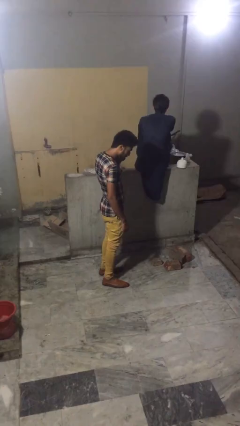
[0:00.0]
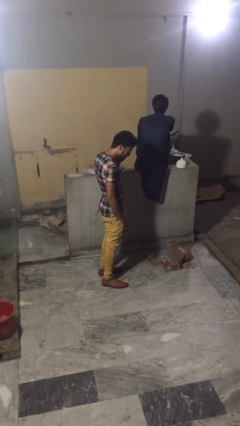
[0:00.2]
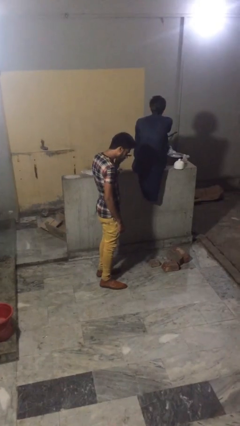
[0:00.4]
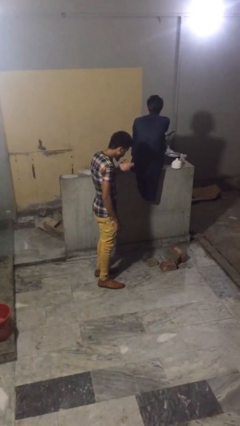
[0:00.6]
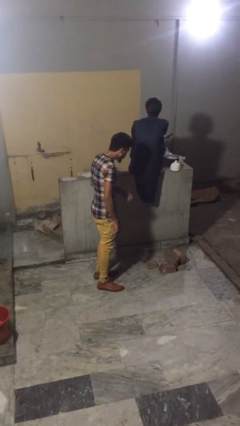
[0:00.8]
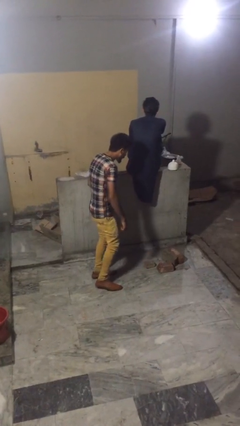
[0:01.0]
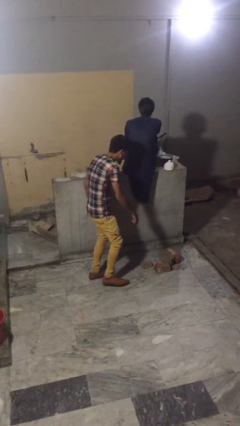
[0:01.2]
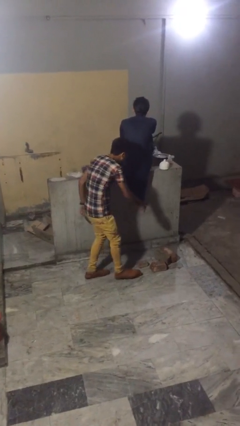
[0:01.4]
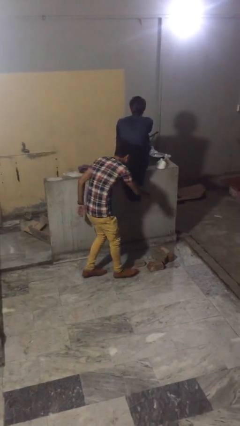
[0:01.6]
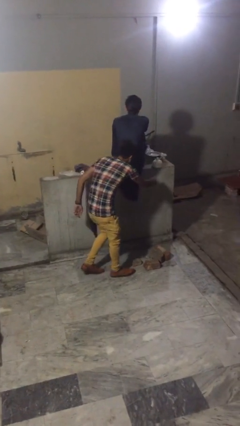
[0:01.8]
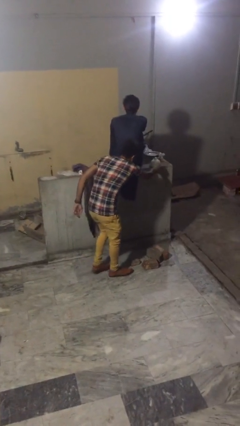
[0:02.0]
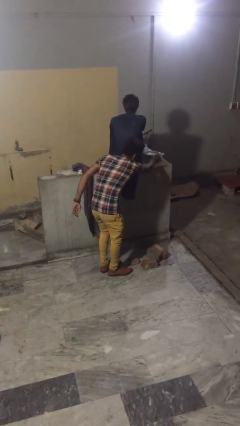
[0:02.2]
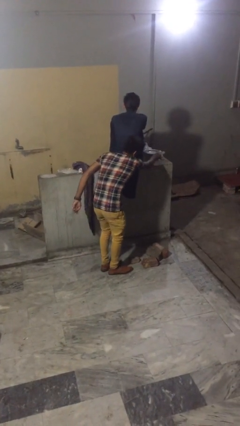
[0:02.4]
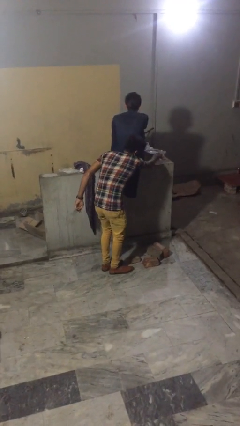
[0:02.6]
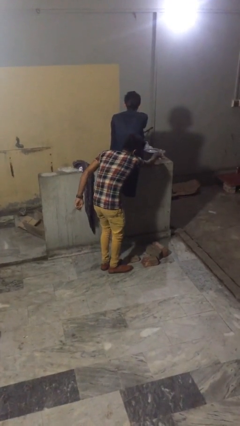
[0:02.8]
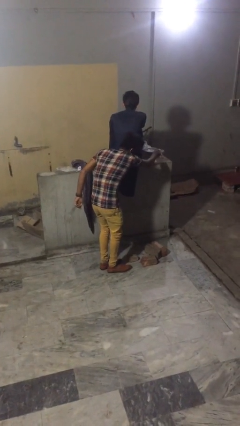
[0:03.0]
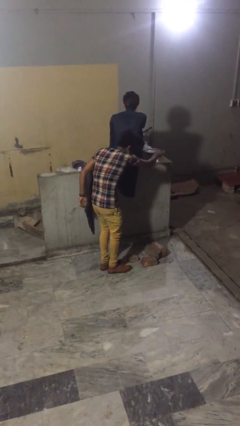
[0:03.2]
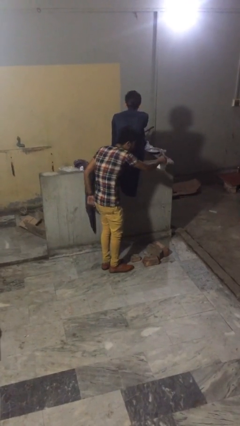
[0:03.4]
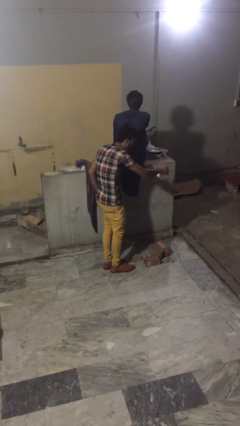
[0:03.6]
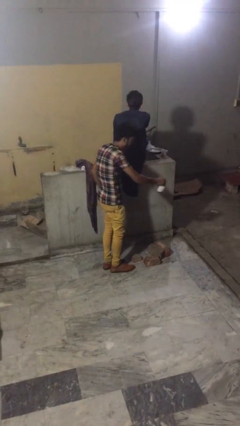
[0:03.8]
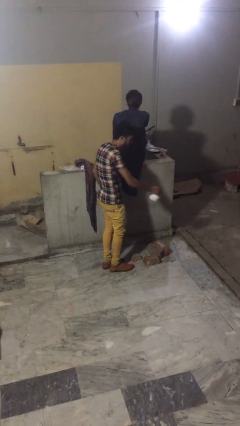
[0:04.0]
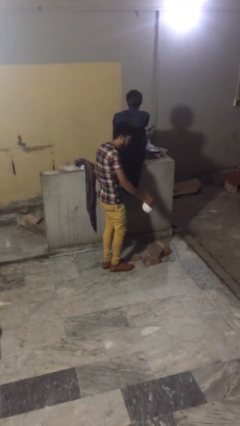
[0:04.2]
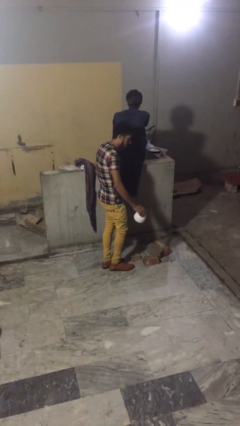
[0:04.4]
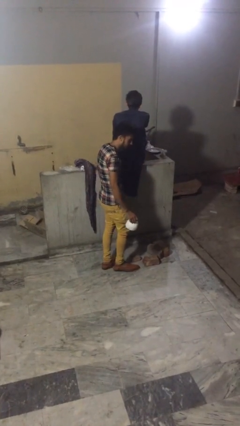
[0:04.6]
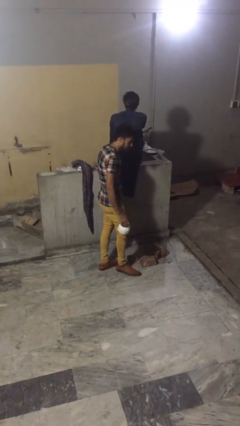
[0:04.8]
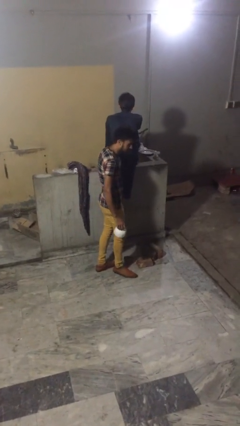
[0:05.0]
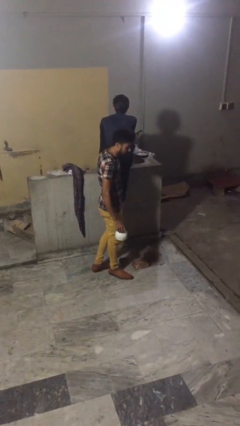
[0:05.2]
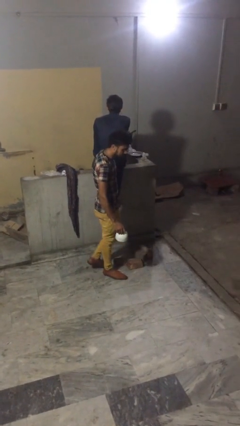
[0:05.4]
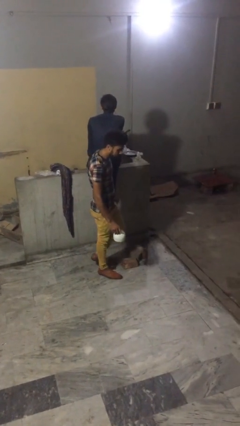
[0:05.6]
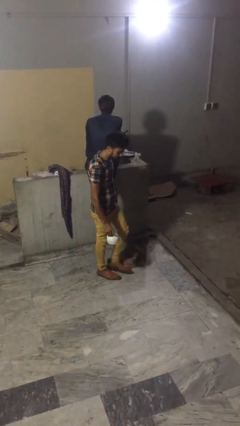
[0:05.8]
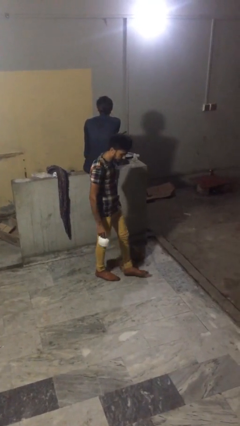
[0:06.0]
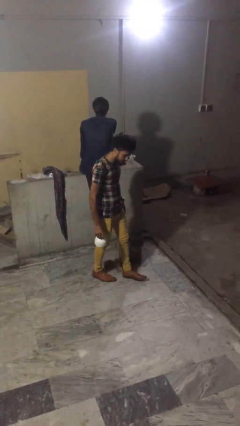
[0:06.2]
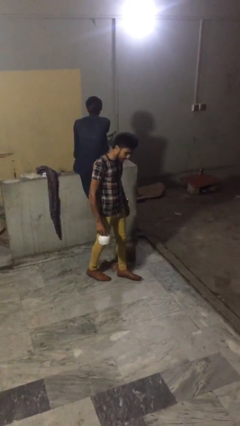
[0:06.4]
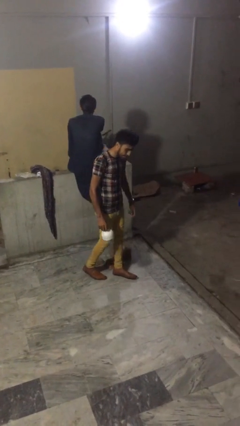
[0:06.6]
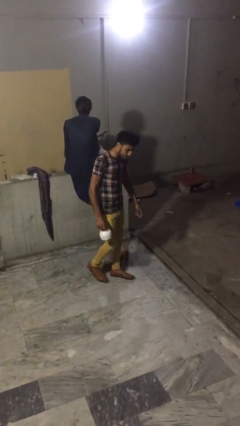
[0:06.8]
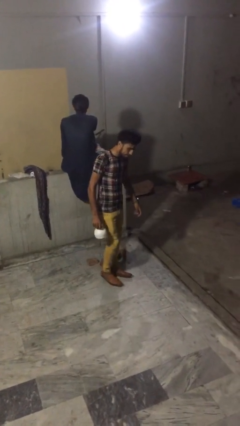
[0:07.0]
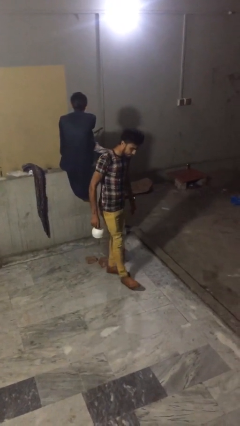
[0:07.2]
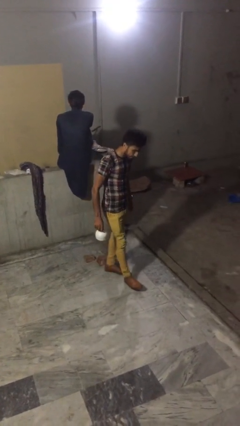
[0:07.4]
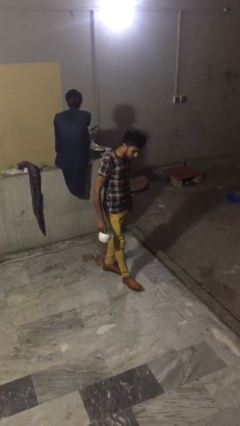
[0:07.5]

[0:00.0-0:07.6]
person steals object from person

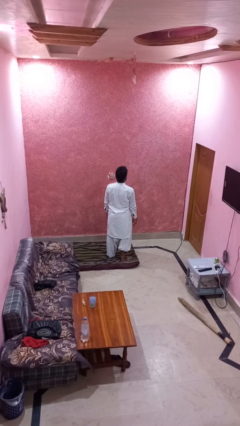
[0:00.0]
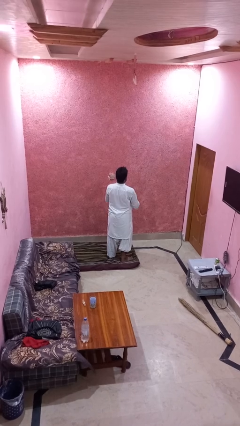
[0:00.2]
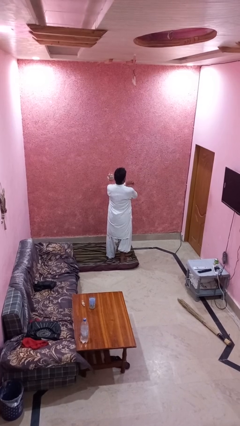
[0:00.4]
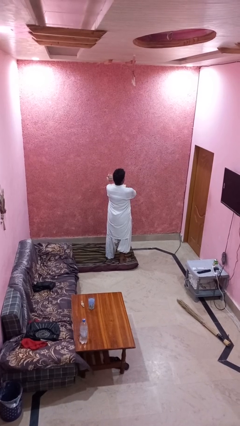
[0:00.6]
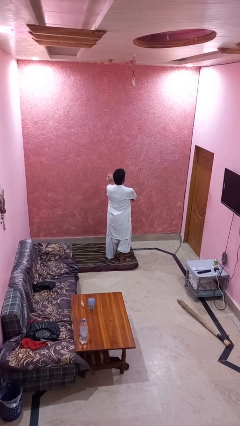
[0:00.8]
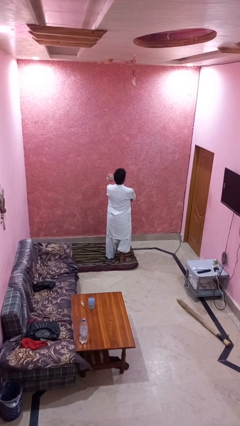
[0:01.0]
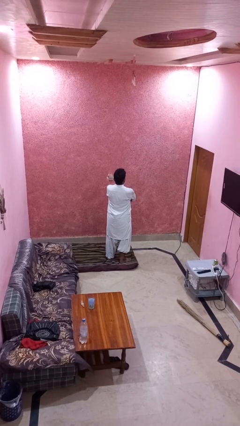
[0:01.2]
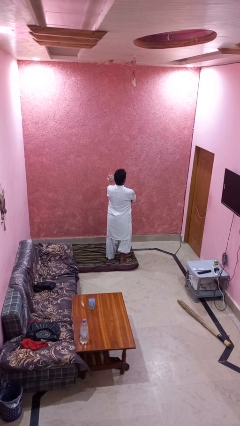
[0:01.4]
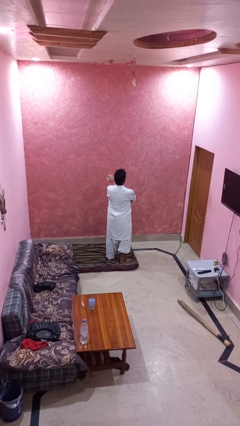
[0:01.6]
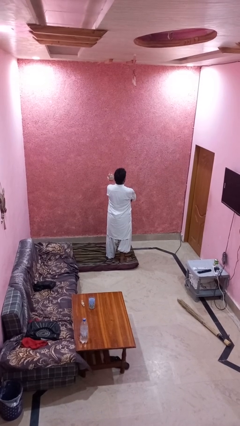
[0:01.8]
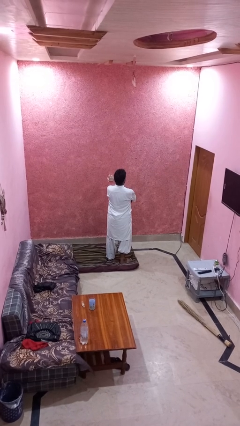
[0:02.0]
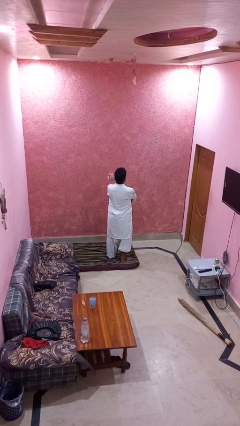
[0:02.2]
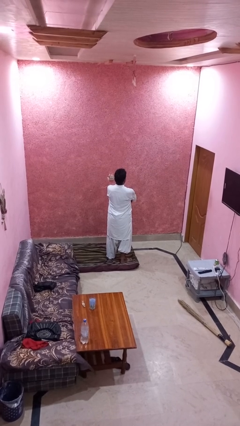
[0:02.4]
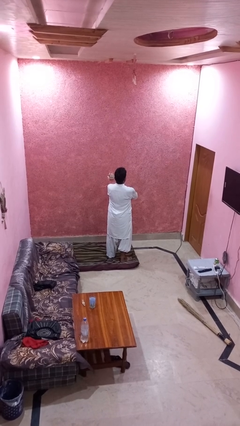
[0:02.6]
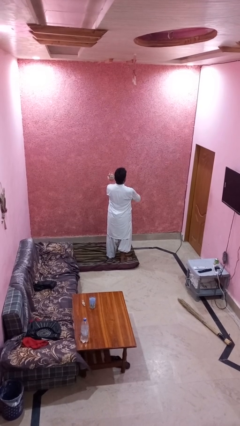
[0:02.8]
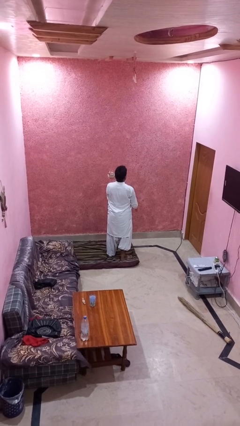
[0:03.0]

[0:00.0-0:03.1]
person crosses arms

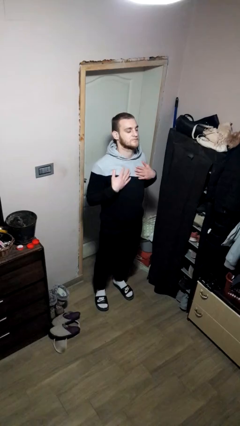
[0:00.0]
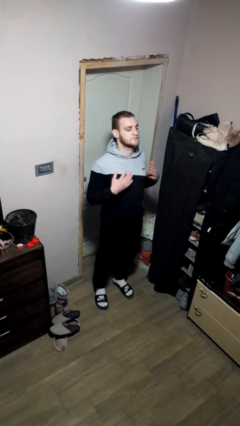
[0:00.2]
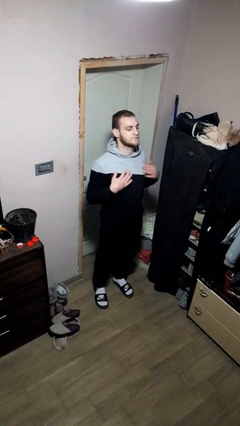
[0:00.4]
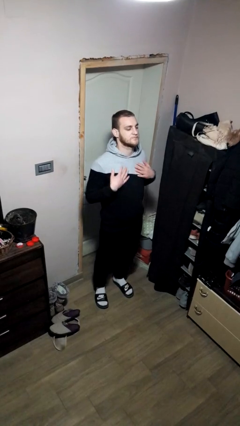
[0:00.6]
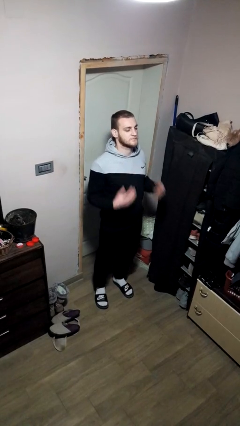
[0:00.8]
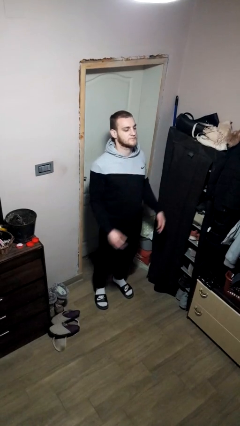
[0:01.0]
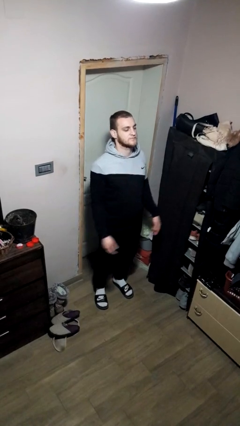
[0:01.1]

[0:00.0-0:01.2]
person drums on chest

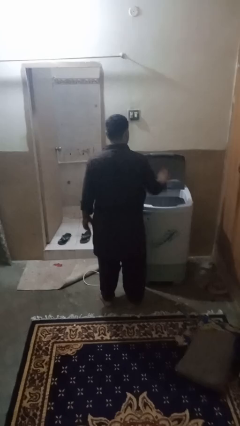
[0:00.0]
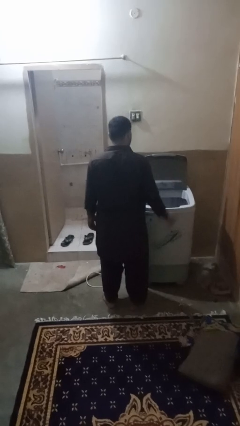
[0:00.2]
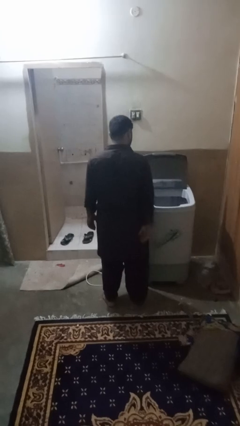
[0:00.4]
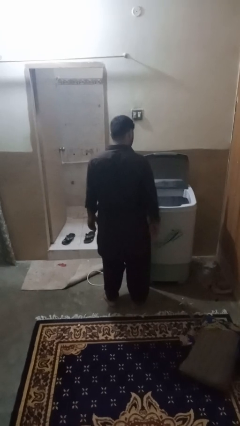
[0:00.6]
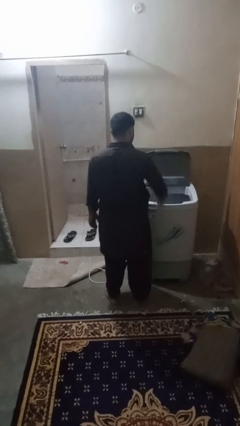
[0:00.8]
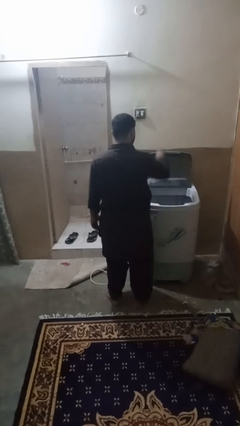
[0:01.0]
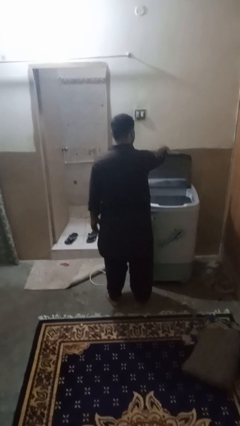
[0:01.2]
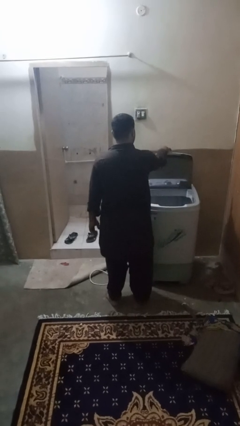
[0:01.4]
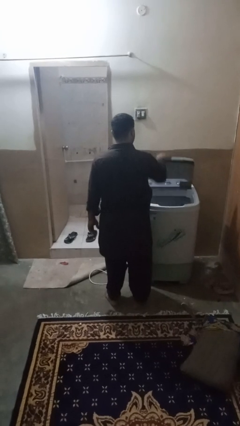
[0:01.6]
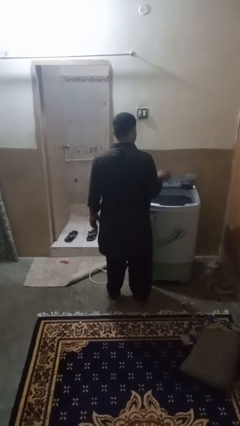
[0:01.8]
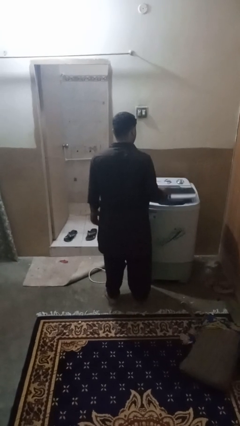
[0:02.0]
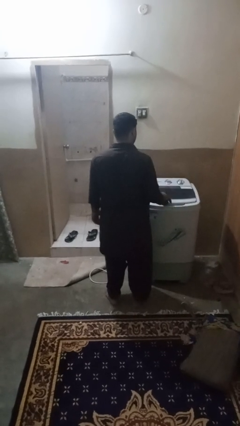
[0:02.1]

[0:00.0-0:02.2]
person closes clothes washer

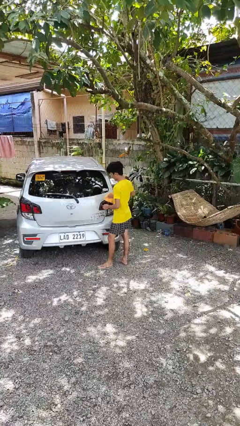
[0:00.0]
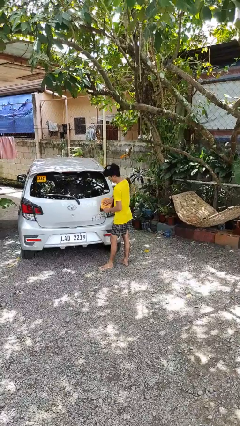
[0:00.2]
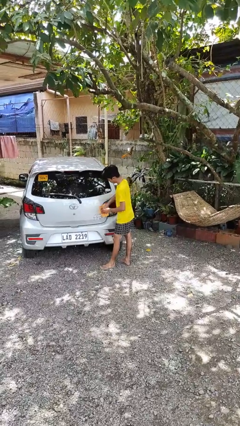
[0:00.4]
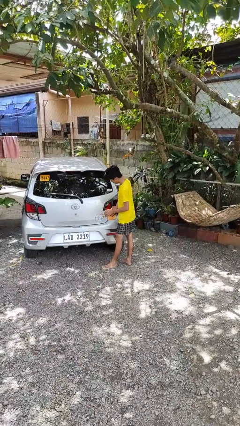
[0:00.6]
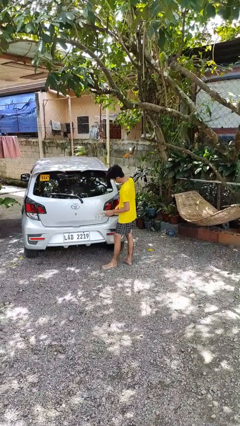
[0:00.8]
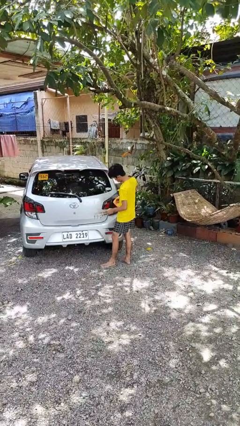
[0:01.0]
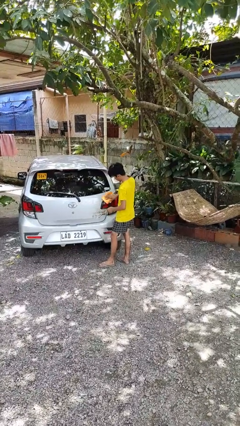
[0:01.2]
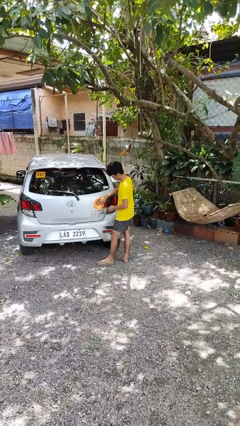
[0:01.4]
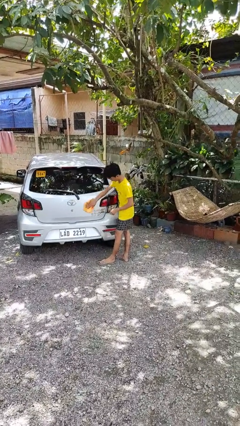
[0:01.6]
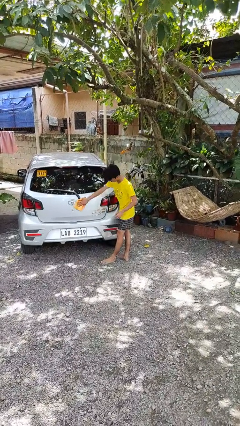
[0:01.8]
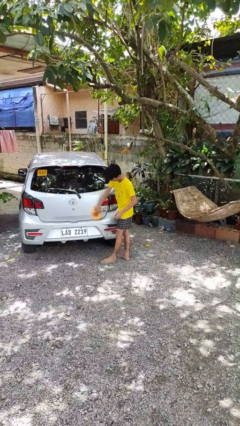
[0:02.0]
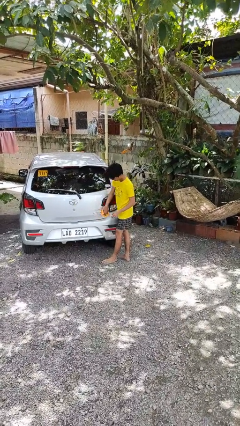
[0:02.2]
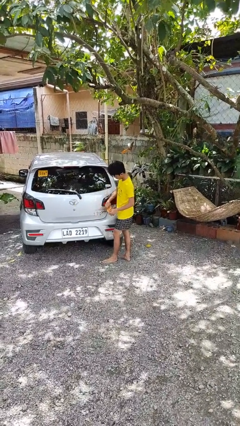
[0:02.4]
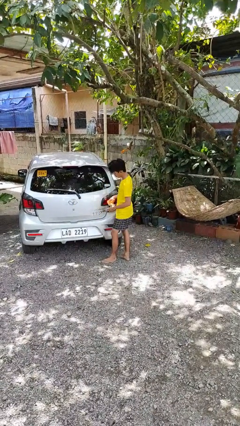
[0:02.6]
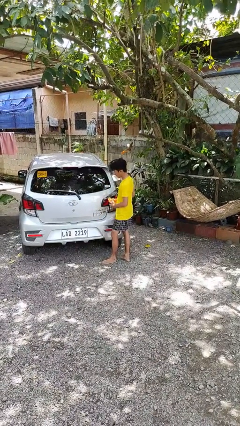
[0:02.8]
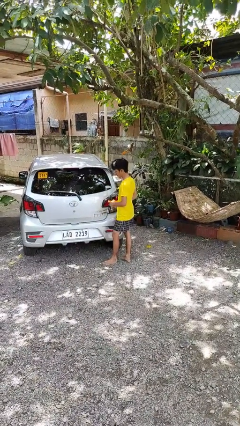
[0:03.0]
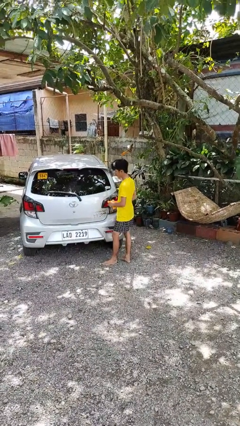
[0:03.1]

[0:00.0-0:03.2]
person polishes car with rag

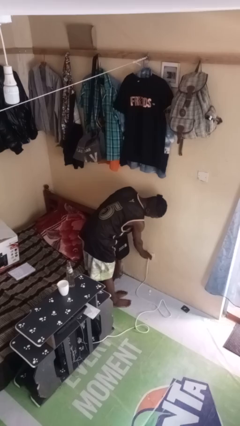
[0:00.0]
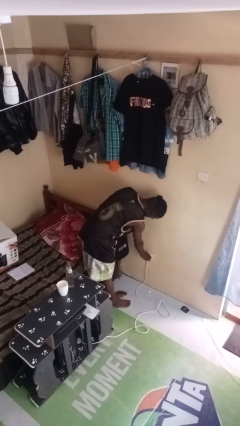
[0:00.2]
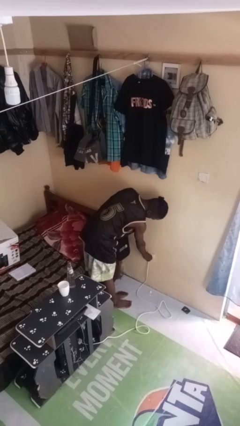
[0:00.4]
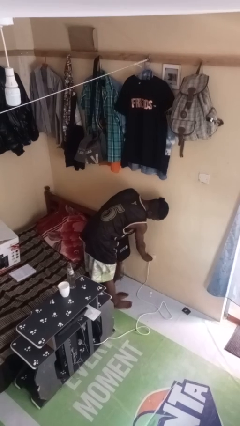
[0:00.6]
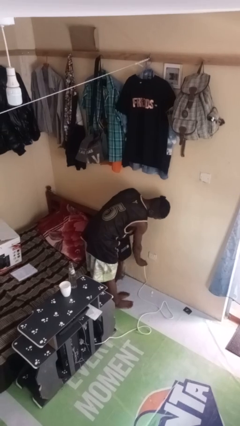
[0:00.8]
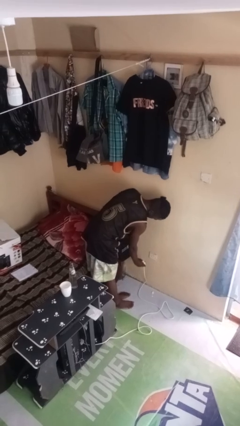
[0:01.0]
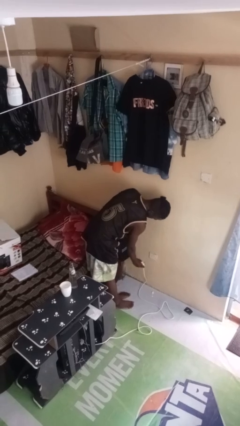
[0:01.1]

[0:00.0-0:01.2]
person unplugs from electrical socket
